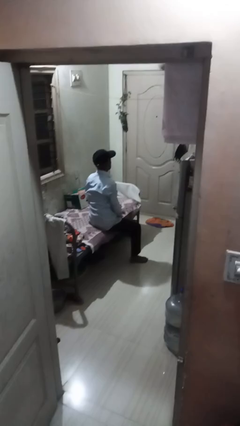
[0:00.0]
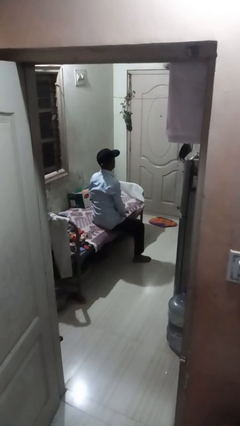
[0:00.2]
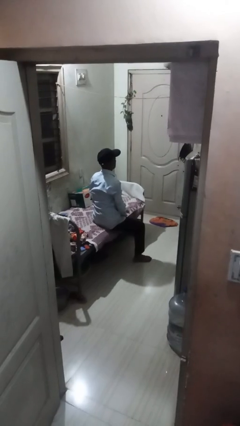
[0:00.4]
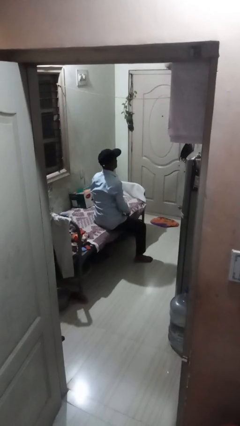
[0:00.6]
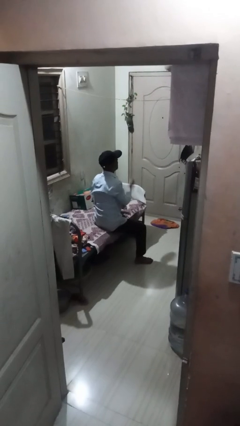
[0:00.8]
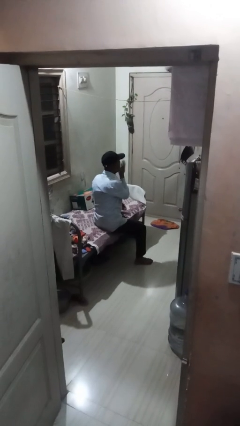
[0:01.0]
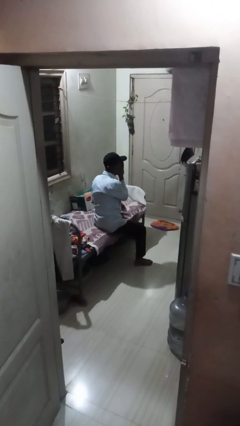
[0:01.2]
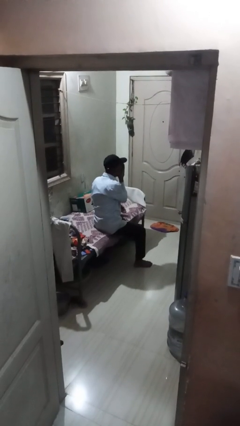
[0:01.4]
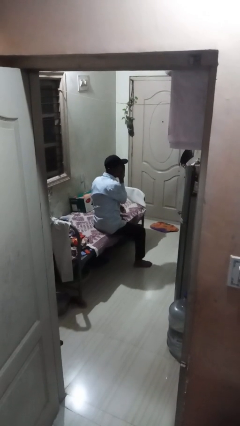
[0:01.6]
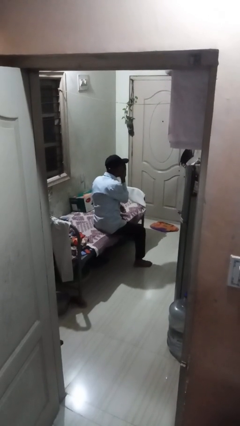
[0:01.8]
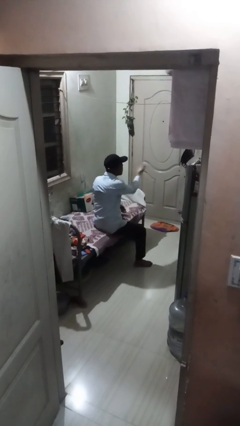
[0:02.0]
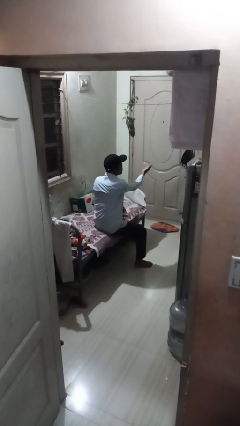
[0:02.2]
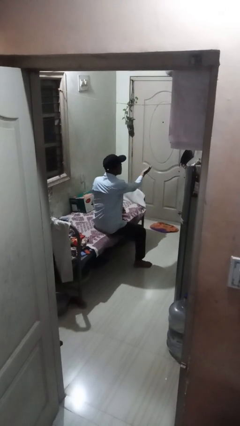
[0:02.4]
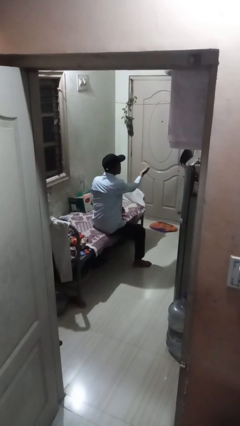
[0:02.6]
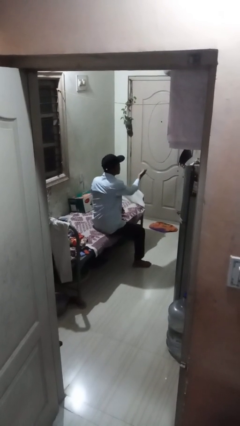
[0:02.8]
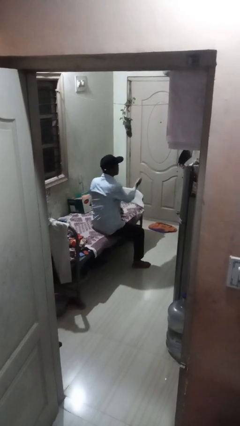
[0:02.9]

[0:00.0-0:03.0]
person gestures blow kiss

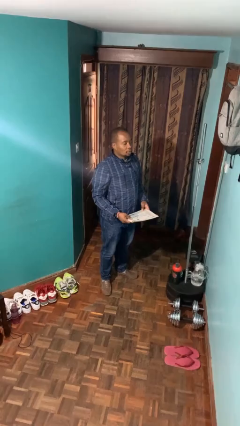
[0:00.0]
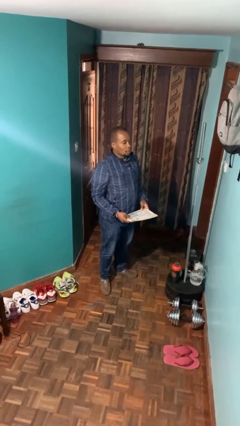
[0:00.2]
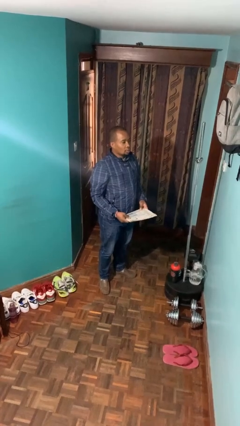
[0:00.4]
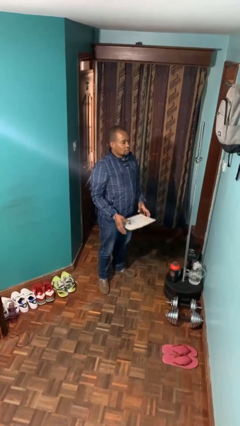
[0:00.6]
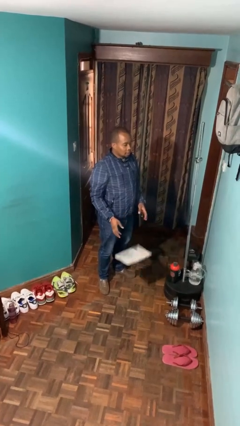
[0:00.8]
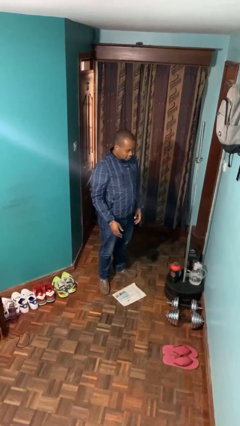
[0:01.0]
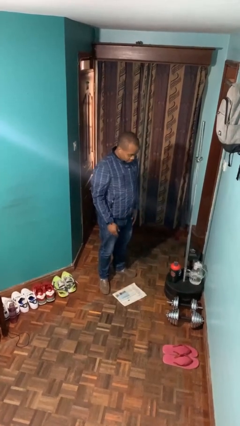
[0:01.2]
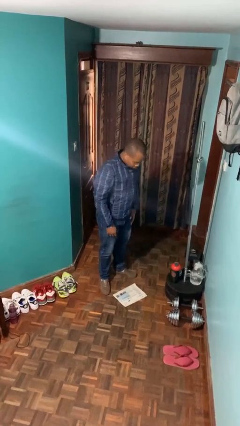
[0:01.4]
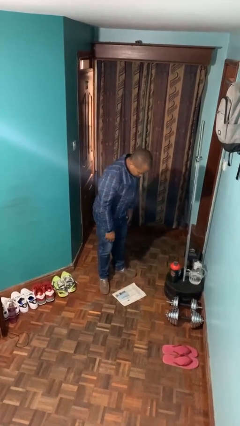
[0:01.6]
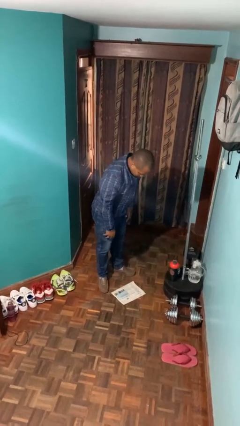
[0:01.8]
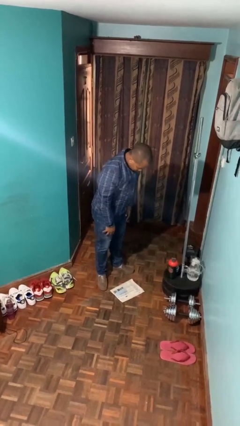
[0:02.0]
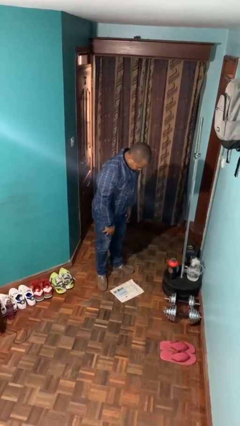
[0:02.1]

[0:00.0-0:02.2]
person drops object

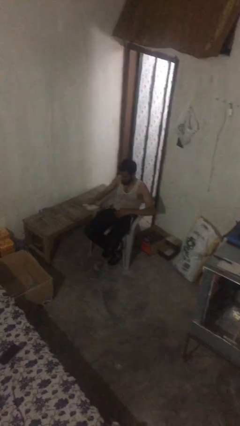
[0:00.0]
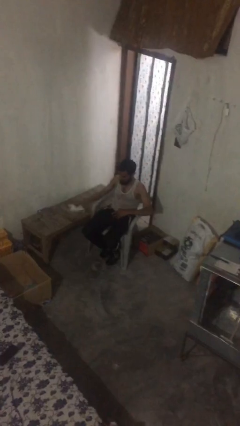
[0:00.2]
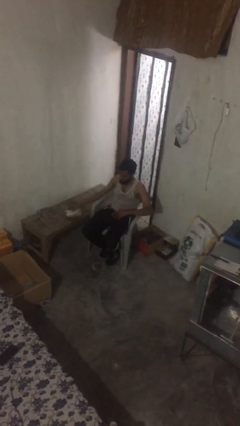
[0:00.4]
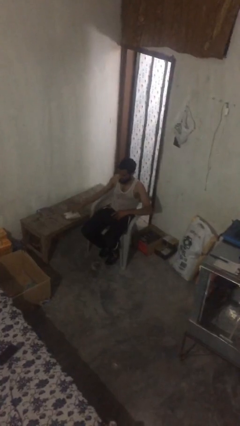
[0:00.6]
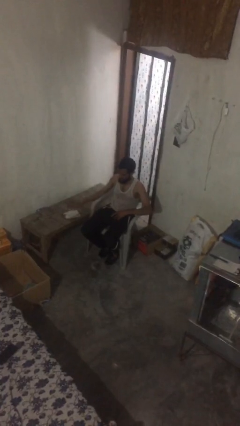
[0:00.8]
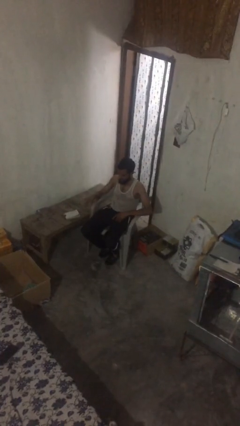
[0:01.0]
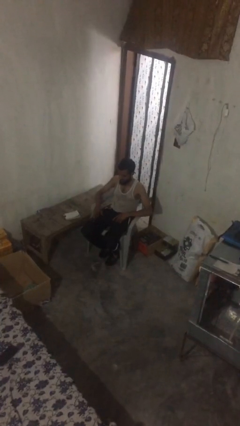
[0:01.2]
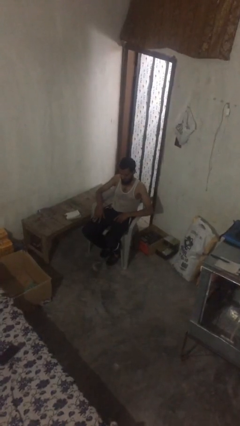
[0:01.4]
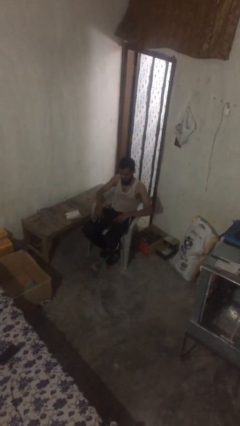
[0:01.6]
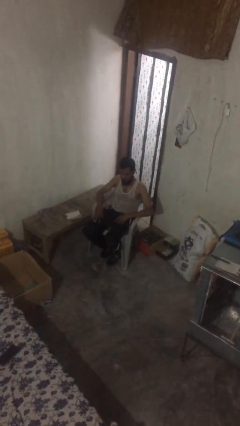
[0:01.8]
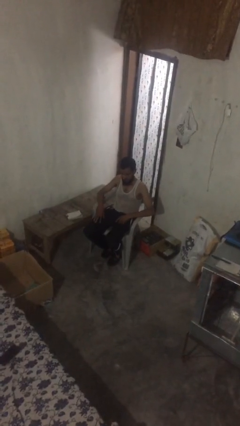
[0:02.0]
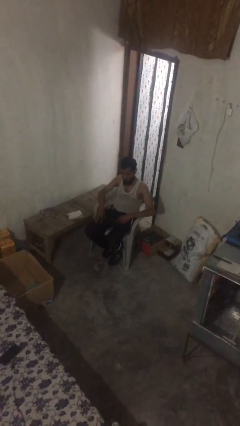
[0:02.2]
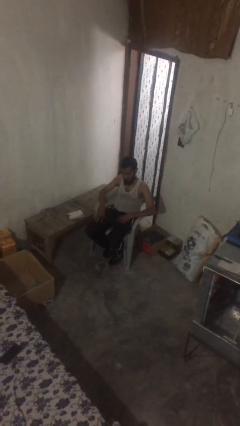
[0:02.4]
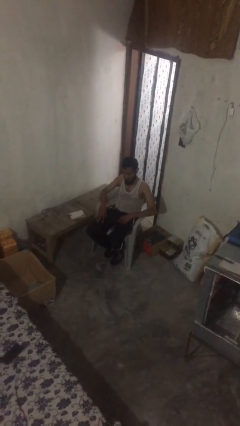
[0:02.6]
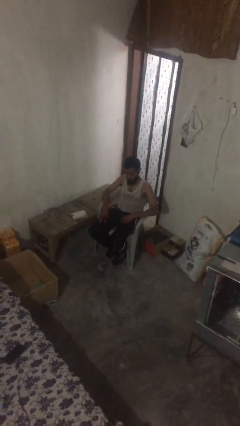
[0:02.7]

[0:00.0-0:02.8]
person puts down object on table

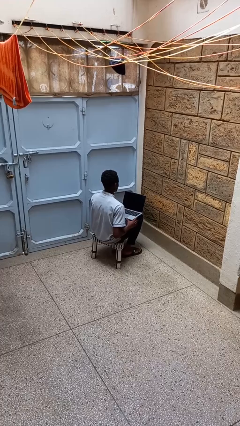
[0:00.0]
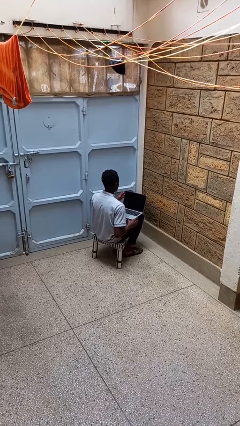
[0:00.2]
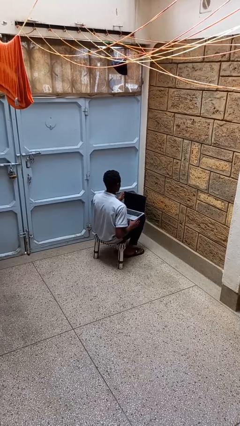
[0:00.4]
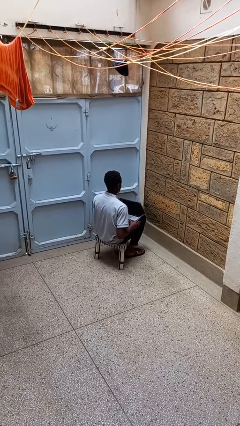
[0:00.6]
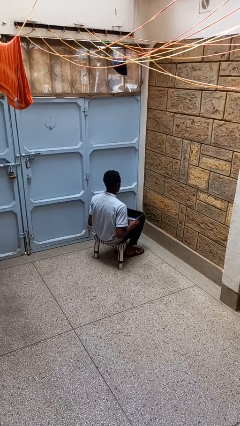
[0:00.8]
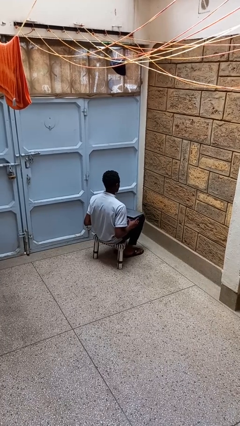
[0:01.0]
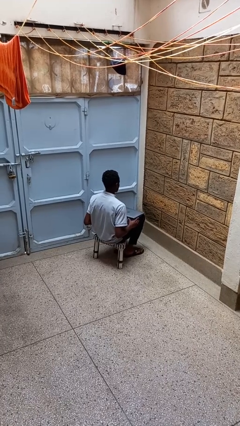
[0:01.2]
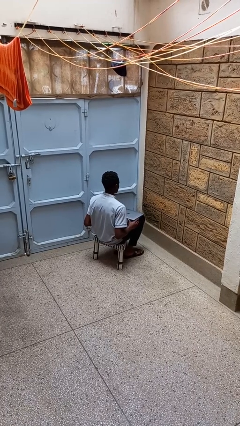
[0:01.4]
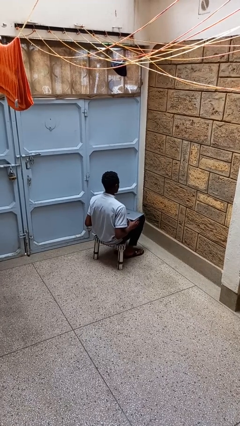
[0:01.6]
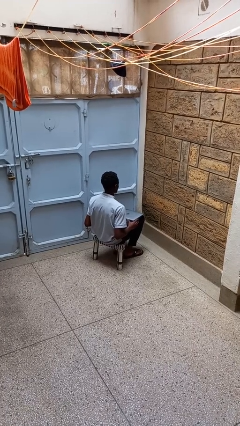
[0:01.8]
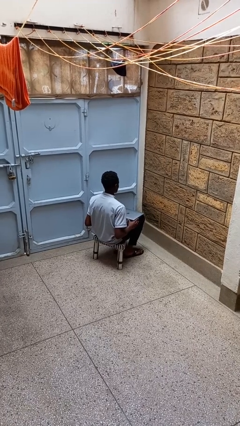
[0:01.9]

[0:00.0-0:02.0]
person closes laptop

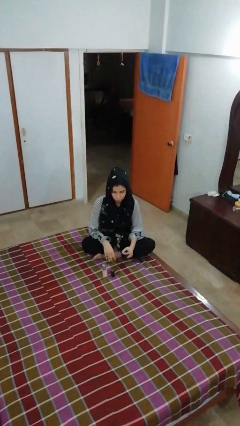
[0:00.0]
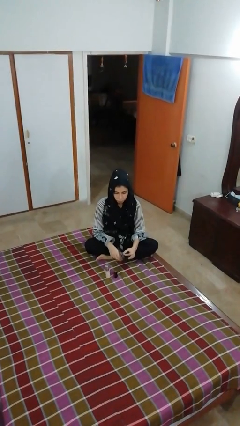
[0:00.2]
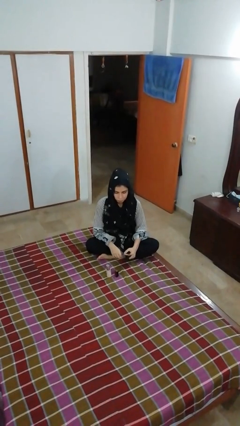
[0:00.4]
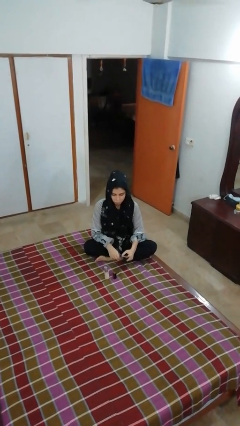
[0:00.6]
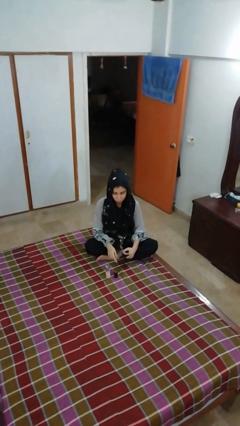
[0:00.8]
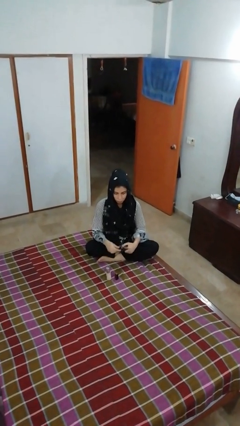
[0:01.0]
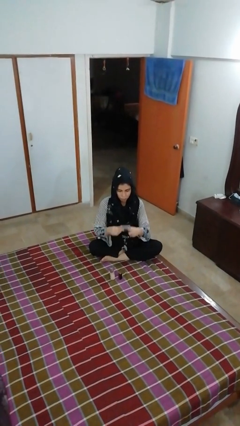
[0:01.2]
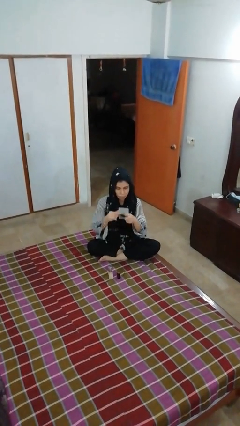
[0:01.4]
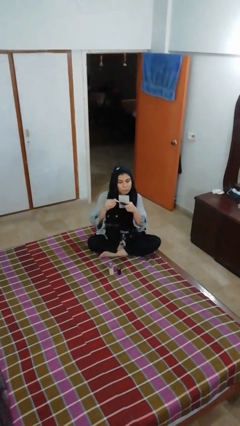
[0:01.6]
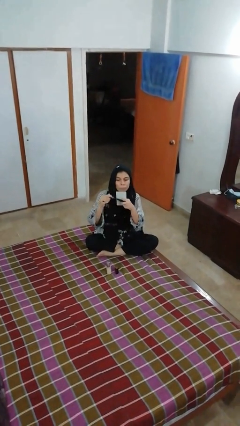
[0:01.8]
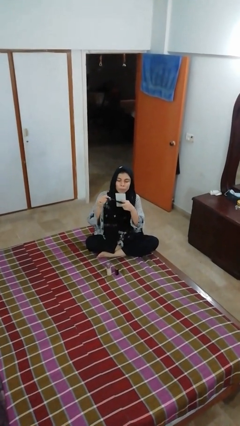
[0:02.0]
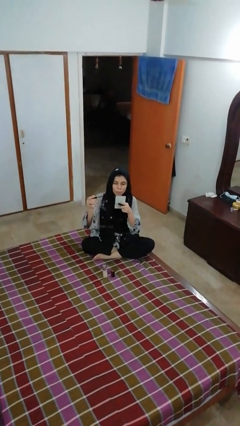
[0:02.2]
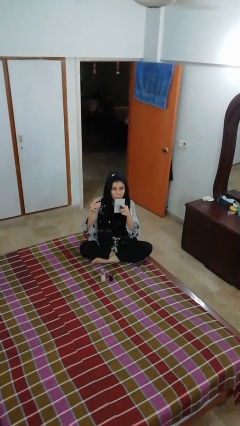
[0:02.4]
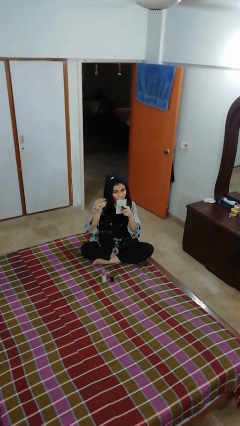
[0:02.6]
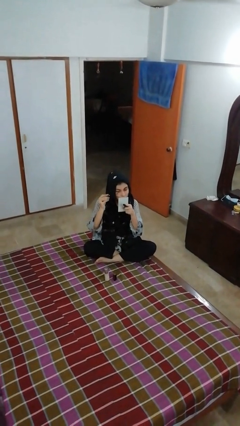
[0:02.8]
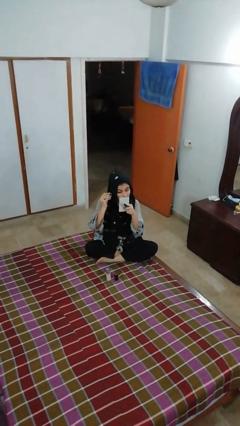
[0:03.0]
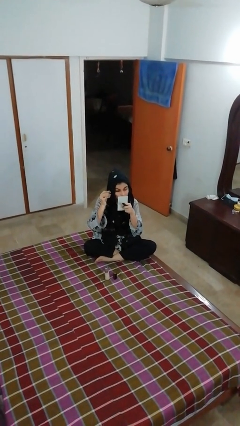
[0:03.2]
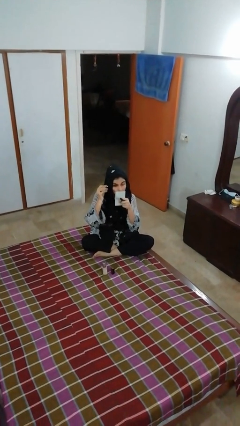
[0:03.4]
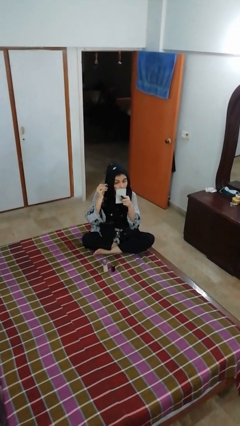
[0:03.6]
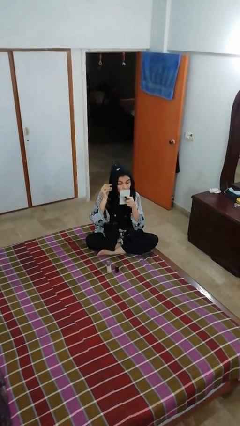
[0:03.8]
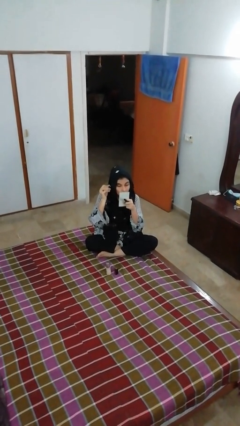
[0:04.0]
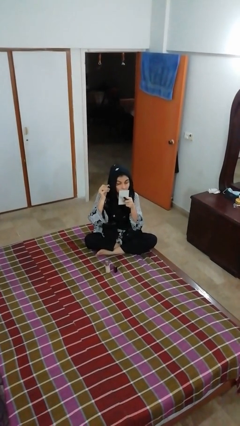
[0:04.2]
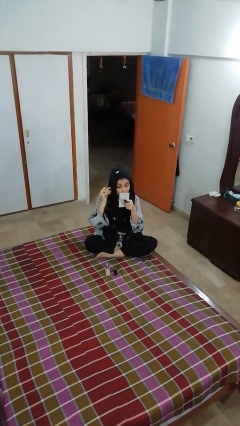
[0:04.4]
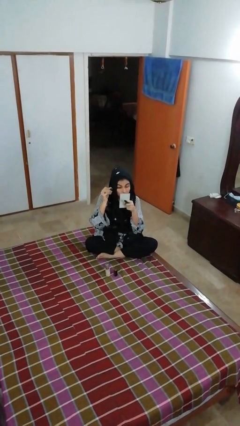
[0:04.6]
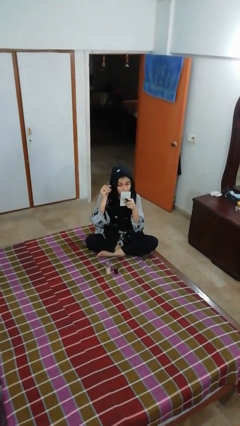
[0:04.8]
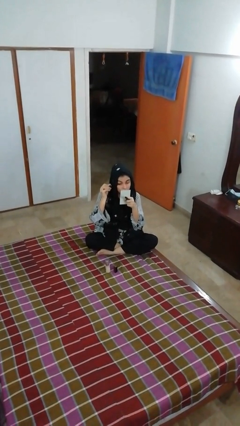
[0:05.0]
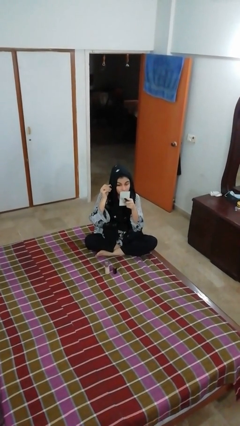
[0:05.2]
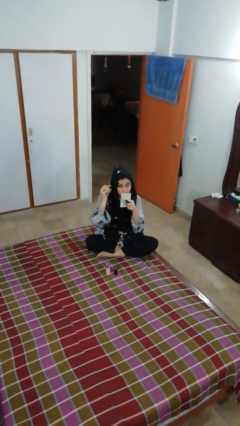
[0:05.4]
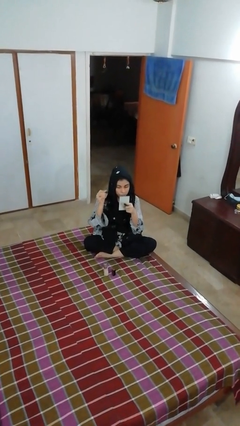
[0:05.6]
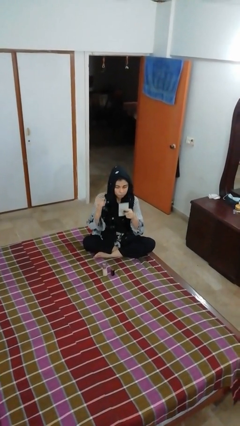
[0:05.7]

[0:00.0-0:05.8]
person applies eye makeup

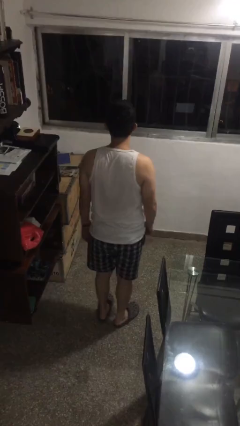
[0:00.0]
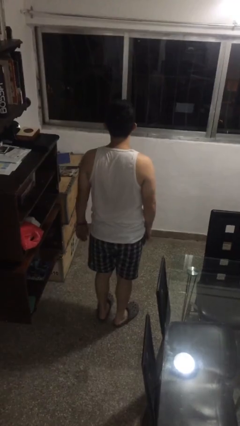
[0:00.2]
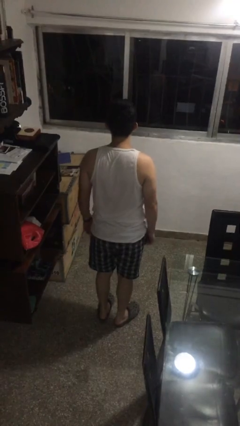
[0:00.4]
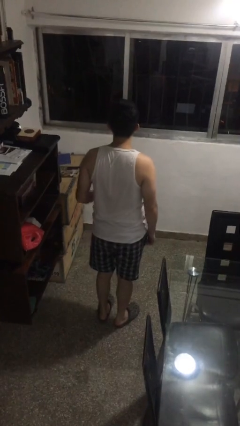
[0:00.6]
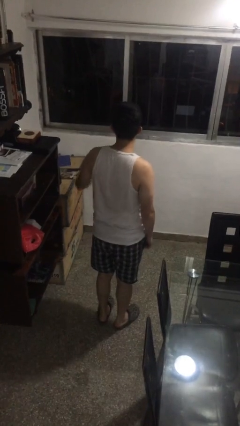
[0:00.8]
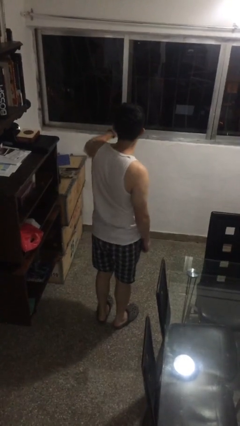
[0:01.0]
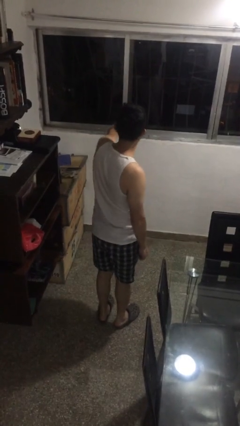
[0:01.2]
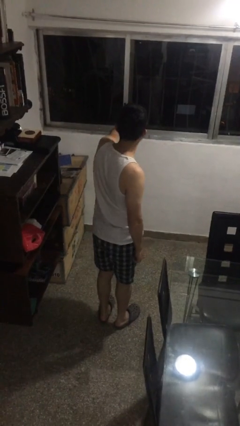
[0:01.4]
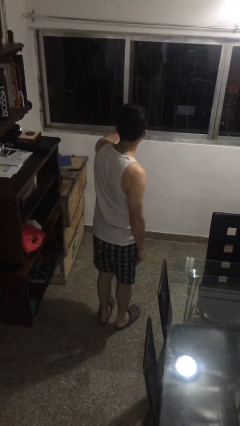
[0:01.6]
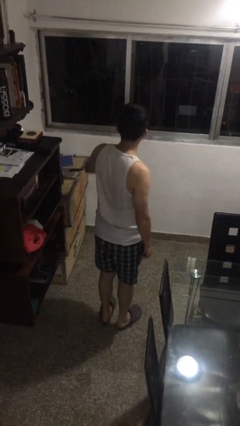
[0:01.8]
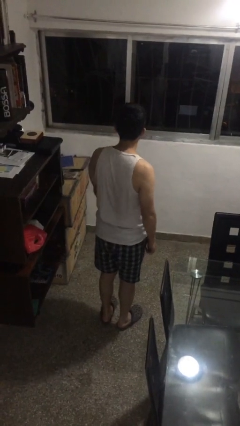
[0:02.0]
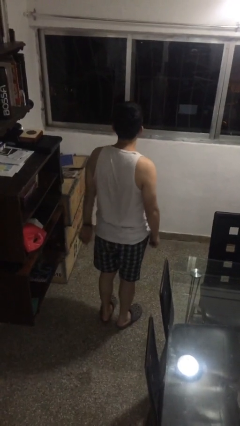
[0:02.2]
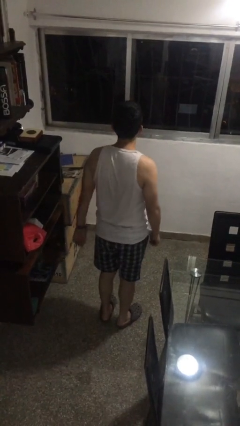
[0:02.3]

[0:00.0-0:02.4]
person karate chop
